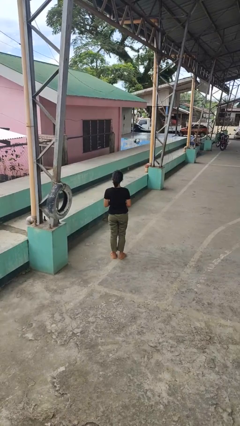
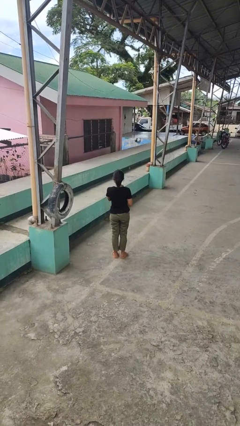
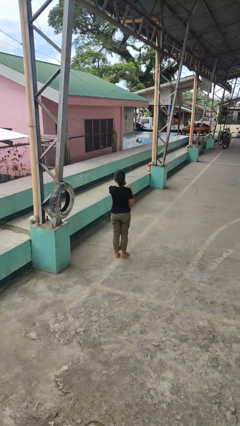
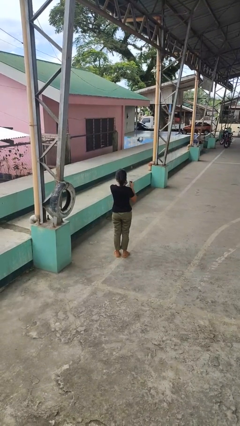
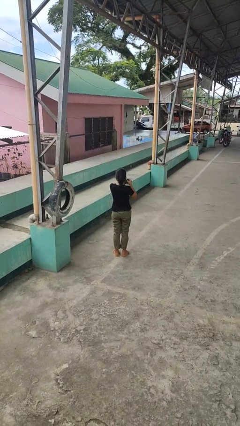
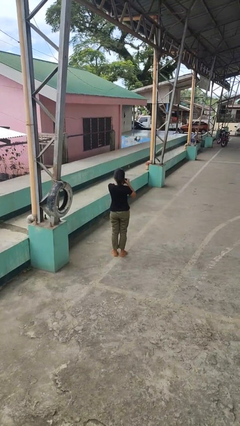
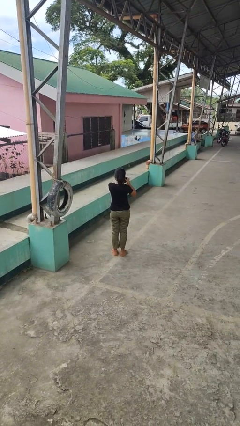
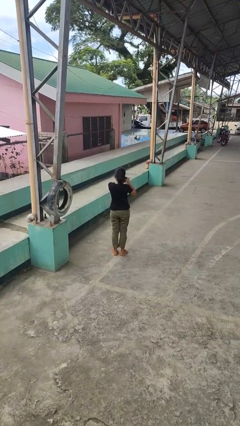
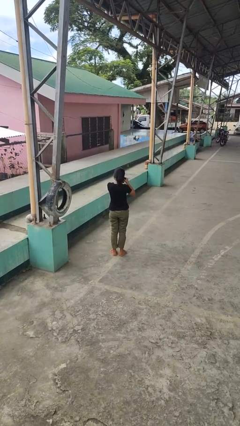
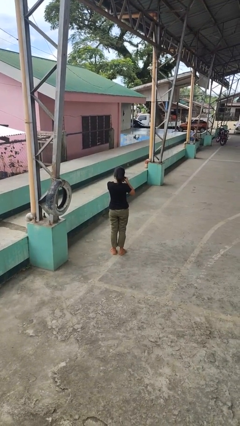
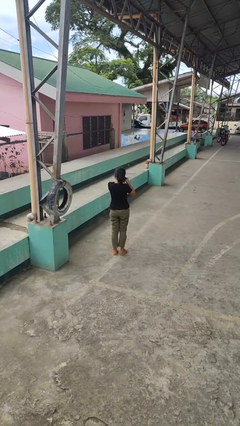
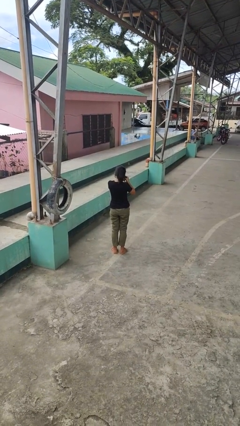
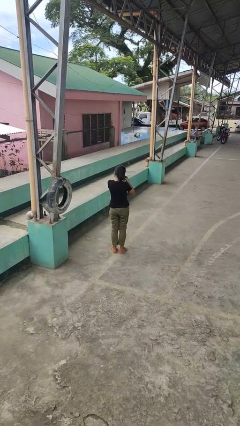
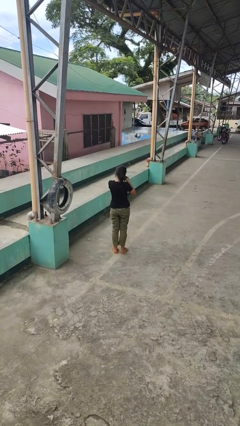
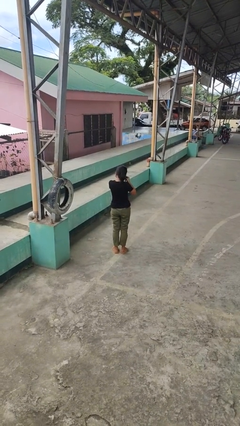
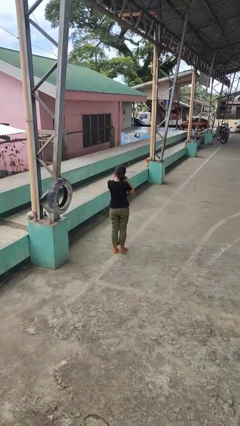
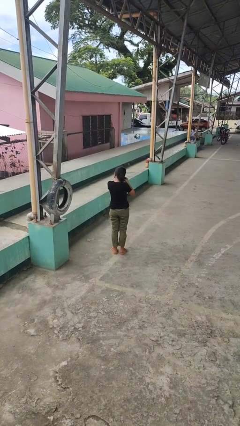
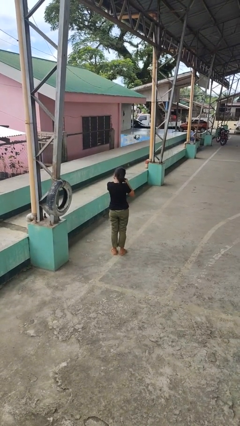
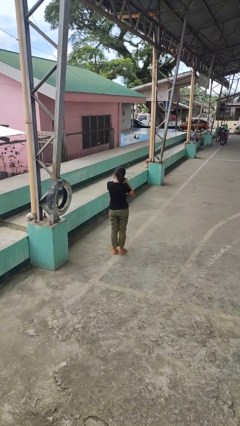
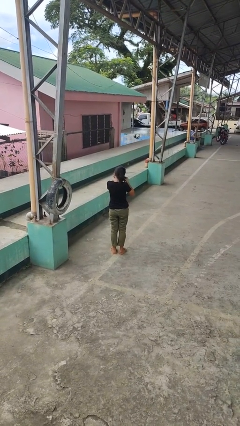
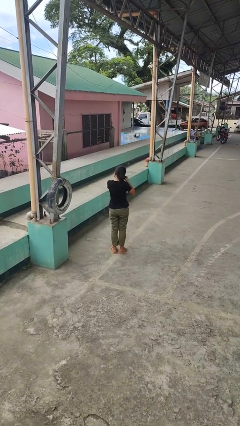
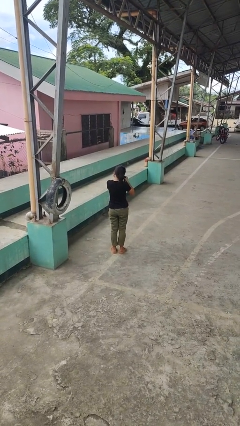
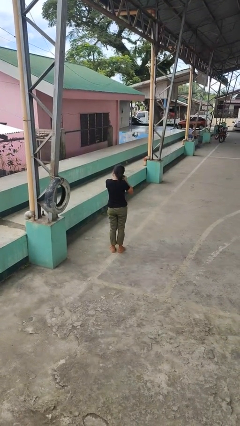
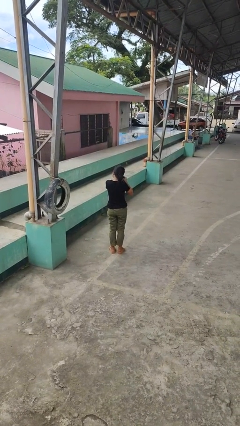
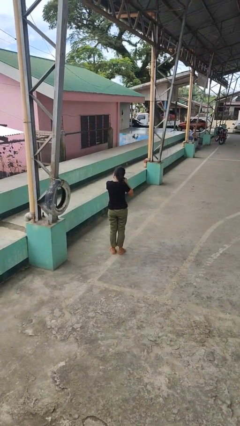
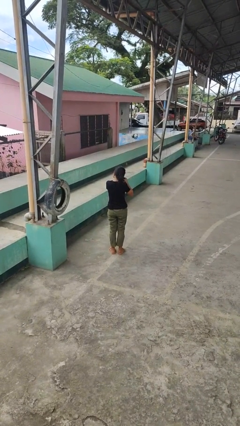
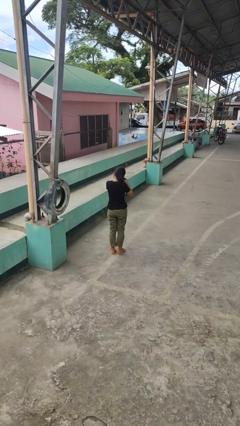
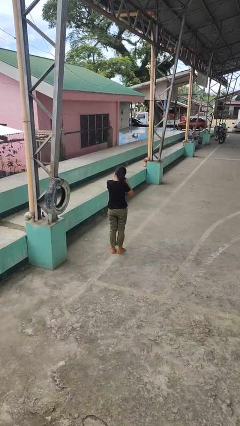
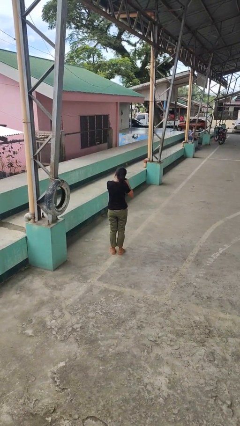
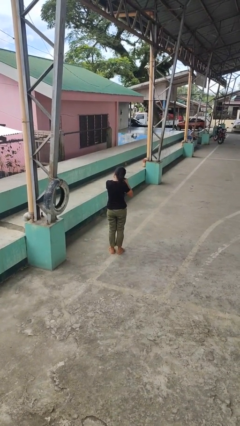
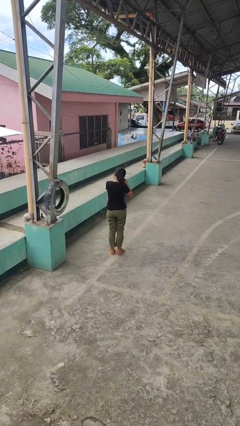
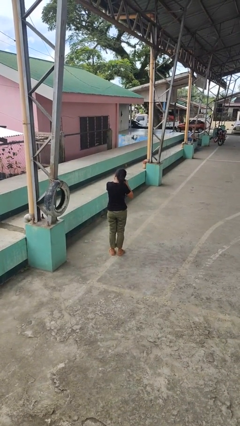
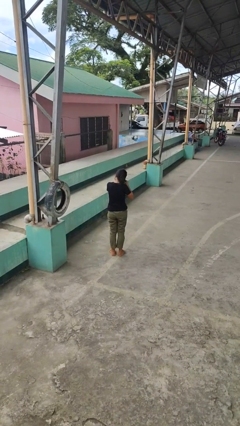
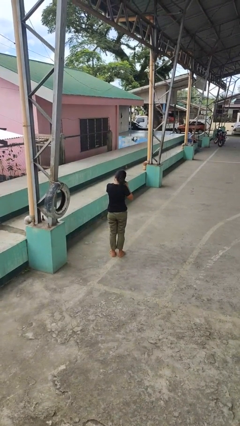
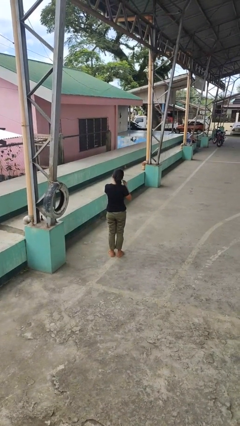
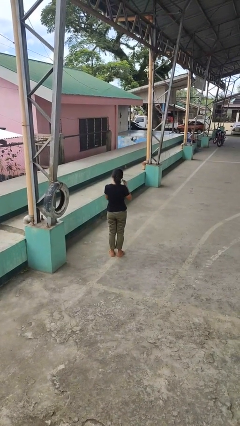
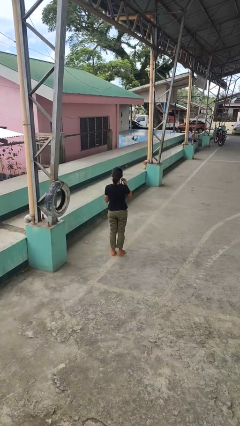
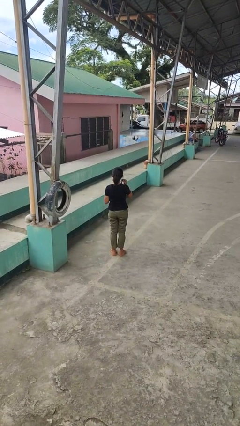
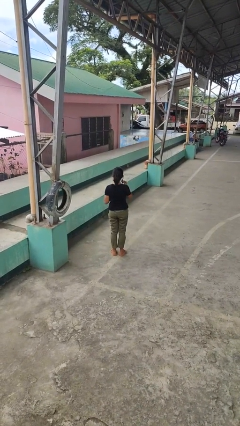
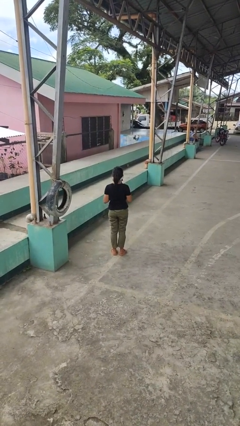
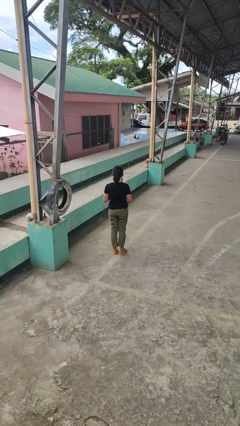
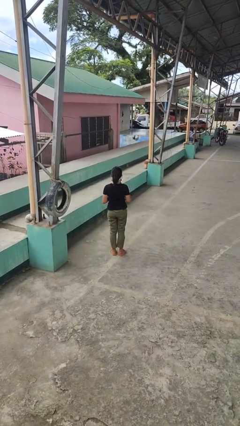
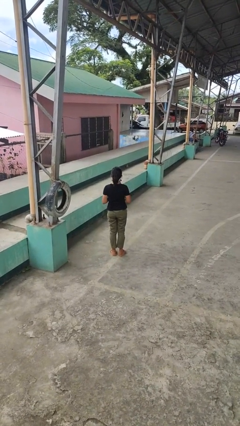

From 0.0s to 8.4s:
person puts on earrings

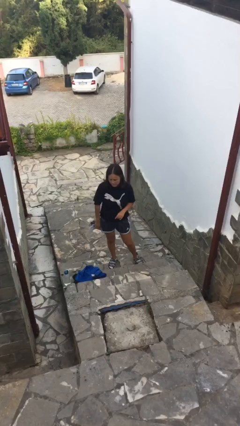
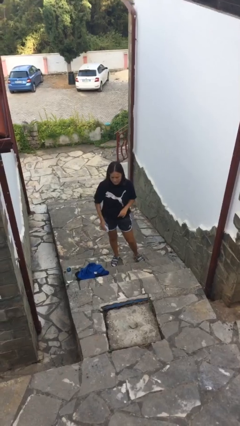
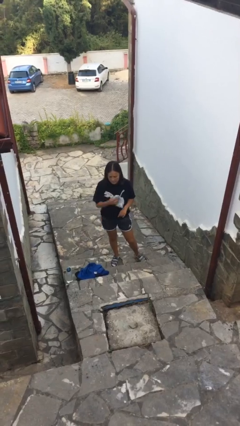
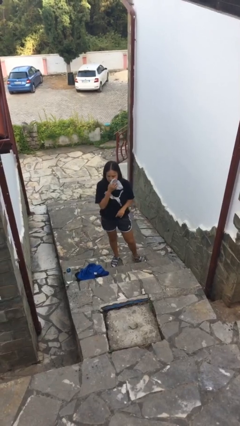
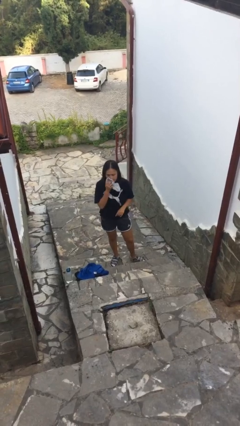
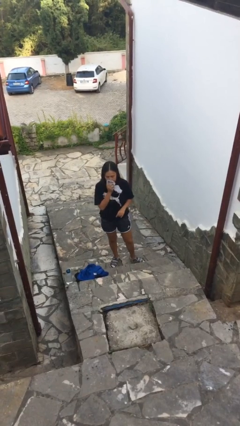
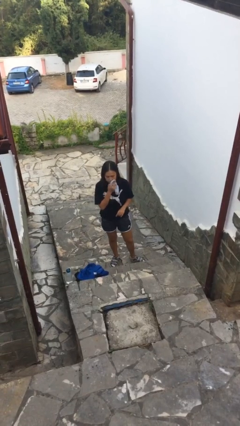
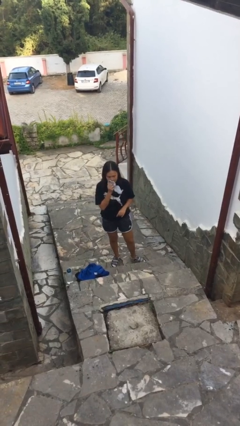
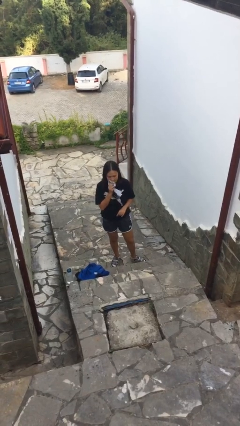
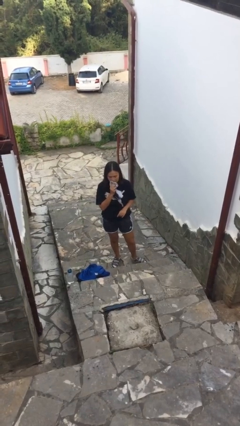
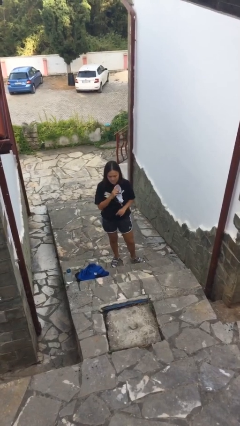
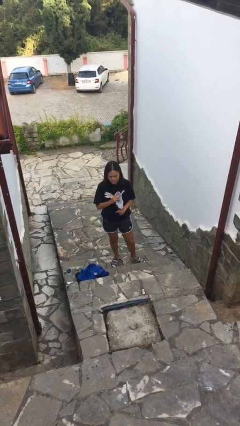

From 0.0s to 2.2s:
person wipes mouth with napkin

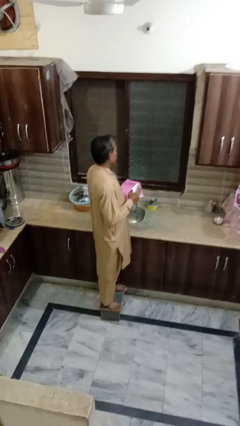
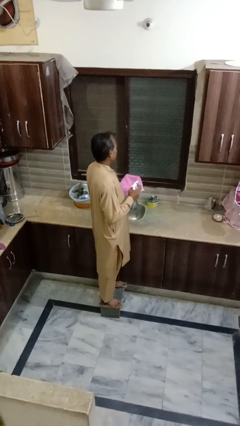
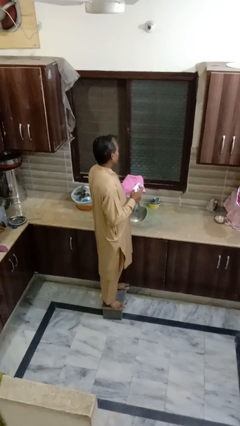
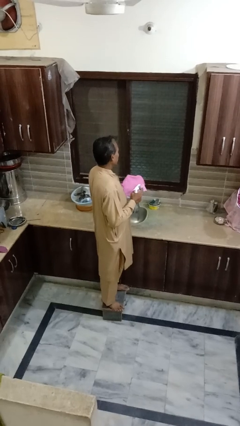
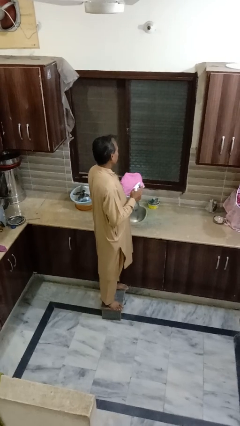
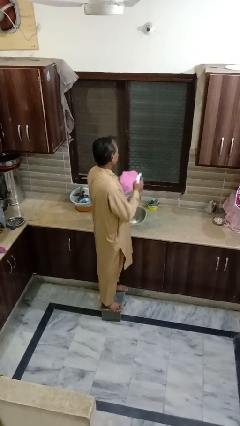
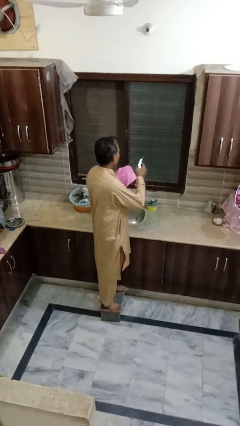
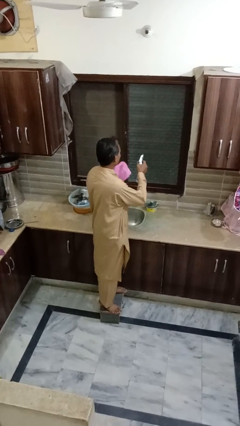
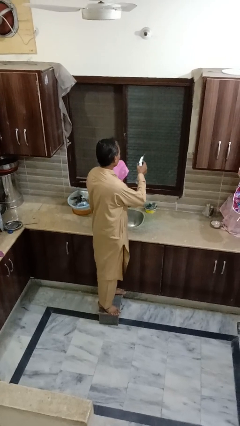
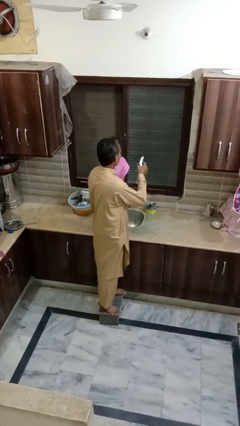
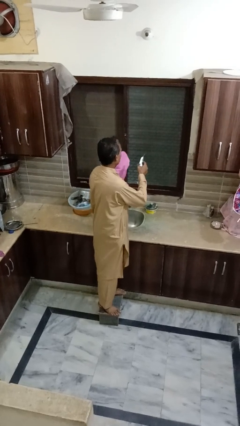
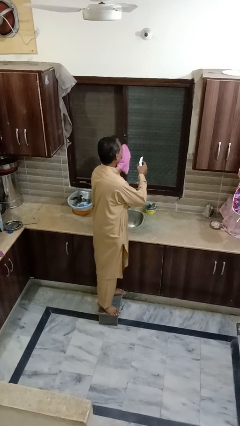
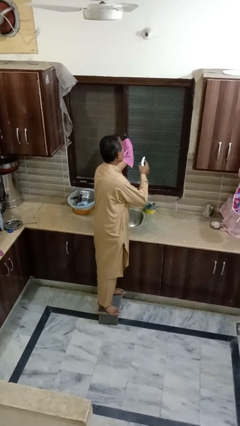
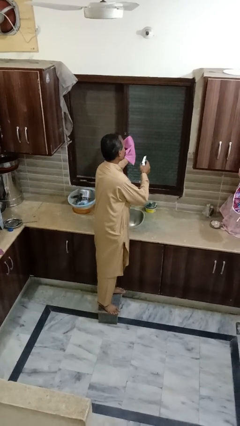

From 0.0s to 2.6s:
person sprays from bottle

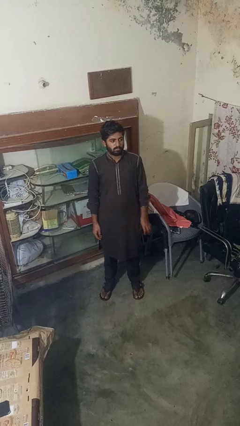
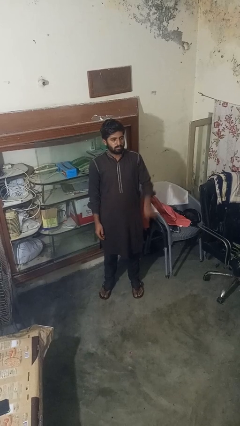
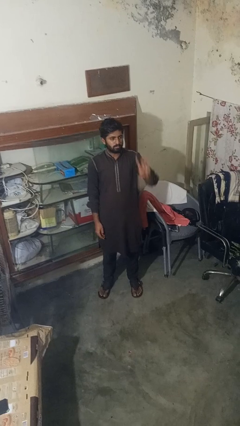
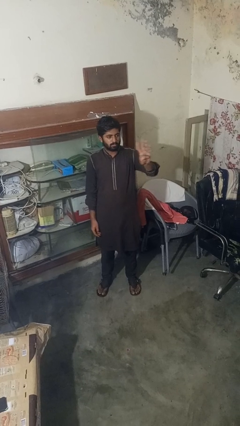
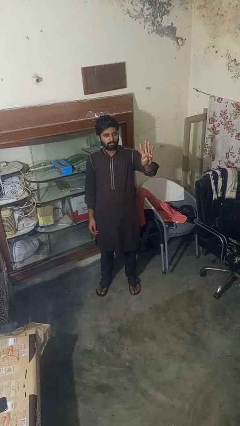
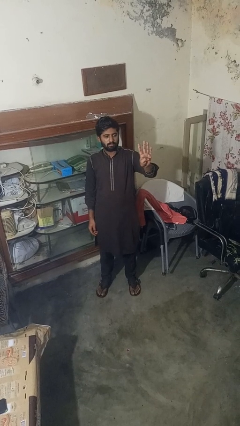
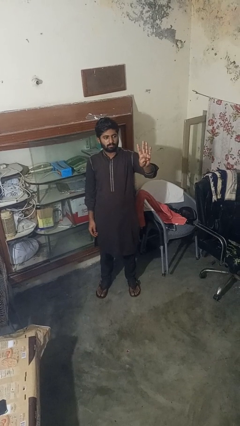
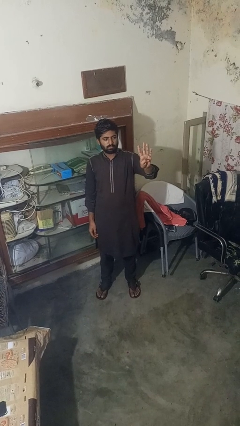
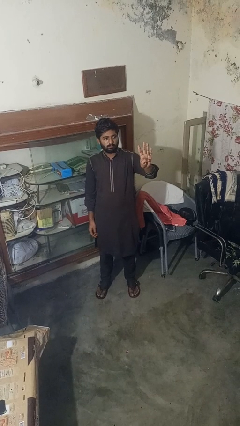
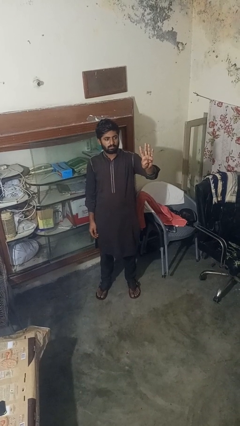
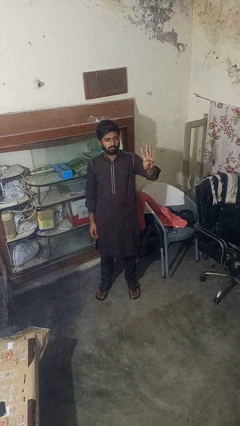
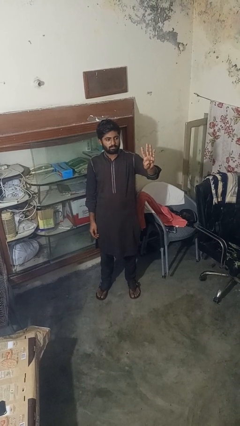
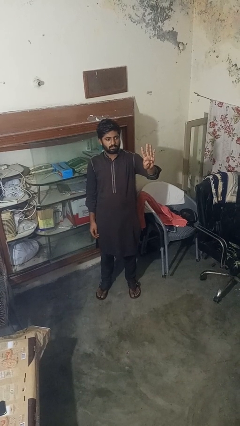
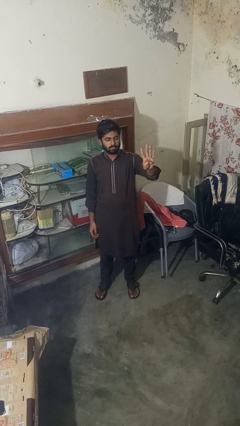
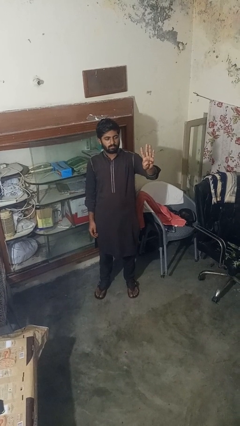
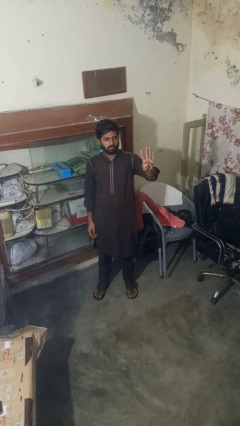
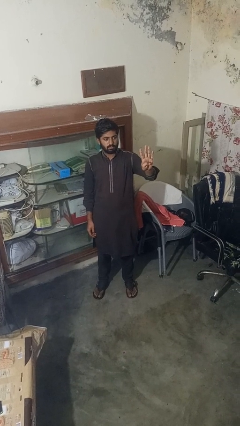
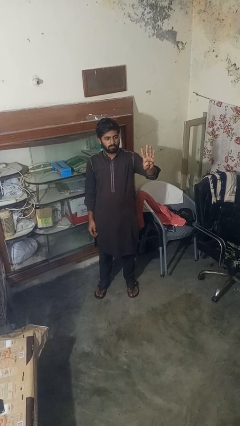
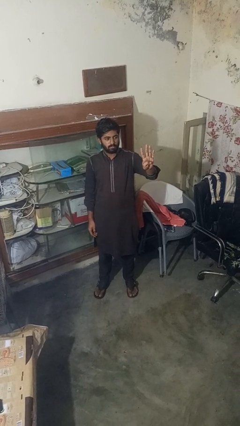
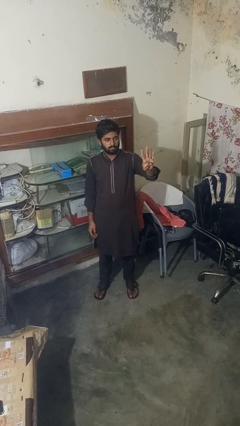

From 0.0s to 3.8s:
person gestures number four

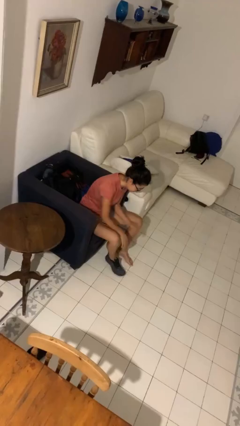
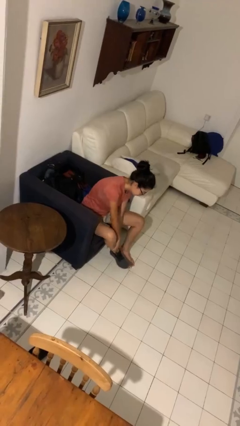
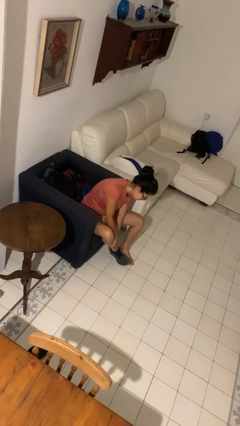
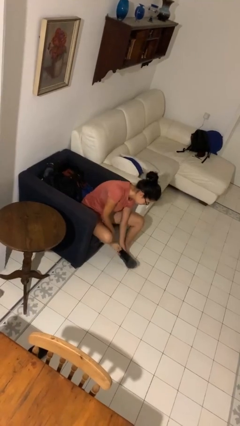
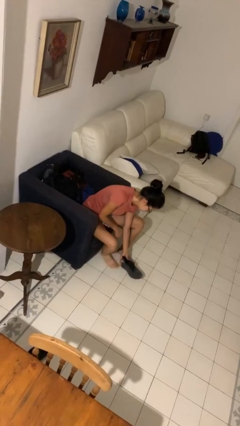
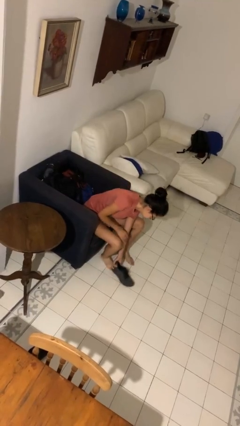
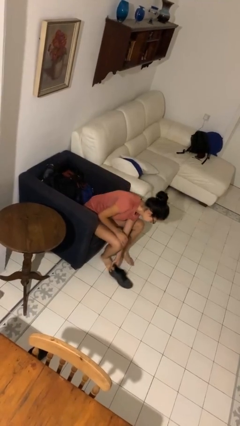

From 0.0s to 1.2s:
person takes off shoes
